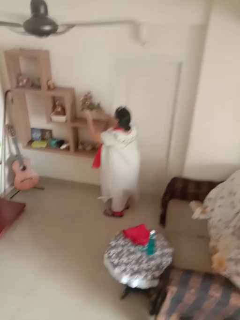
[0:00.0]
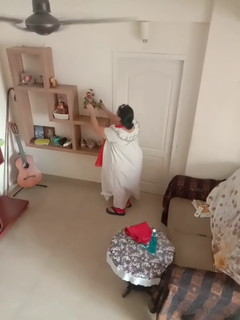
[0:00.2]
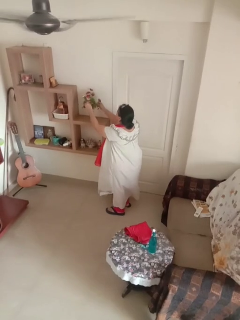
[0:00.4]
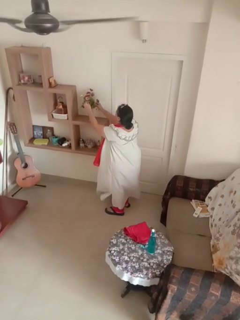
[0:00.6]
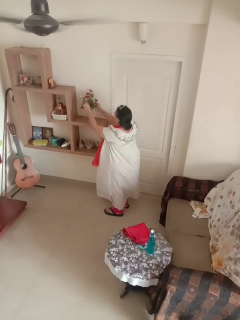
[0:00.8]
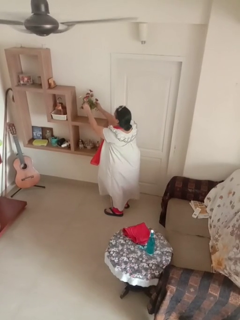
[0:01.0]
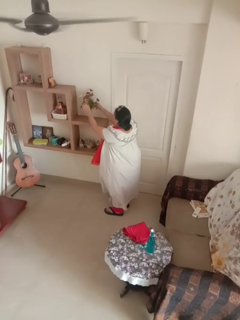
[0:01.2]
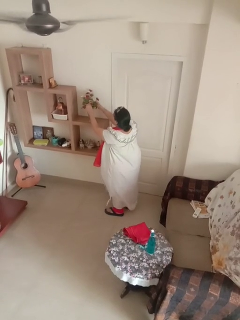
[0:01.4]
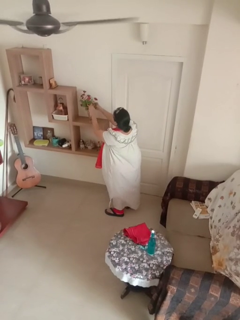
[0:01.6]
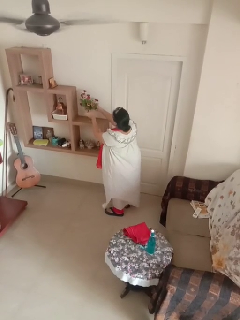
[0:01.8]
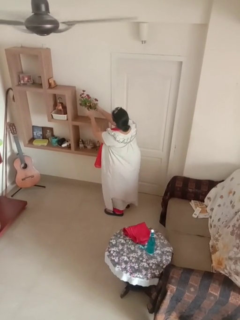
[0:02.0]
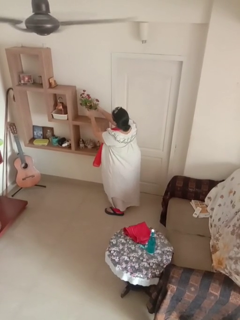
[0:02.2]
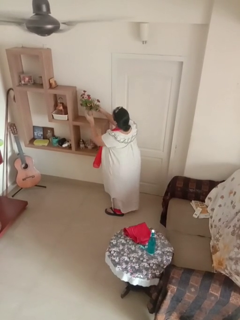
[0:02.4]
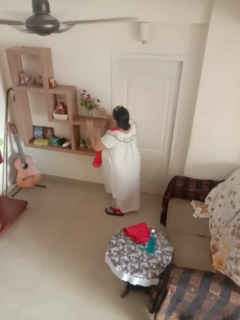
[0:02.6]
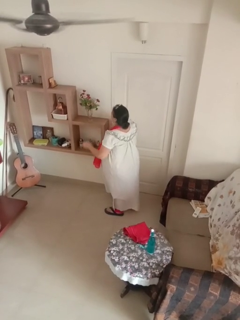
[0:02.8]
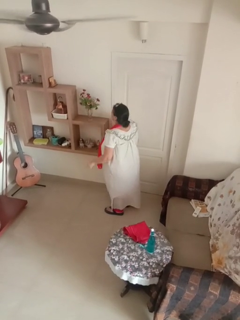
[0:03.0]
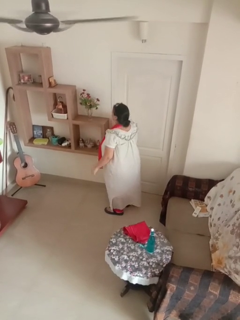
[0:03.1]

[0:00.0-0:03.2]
person arranges flowers in vase

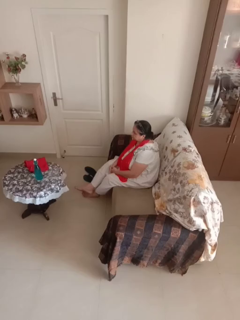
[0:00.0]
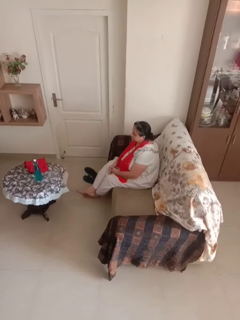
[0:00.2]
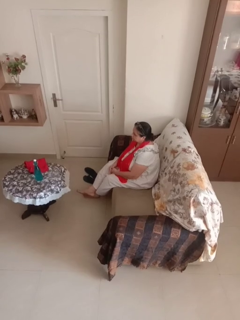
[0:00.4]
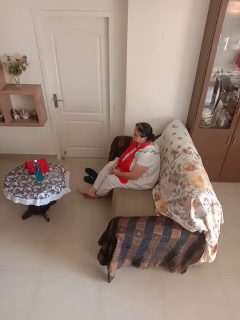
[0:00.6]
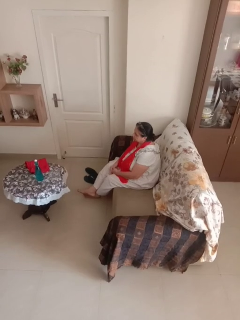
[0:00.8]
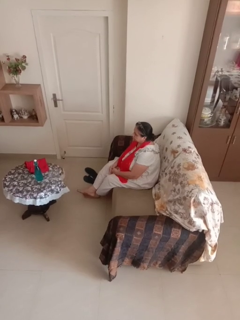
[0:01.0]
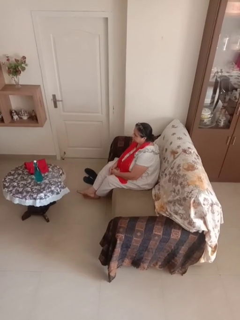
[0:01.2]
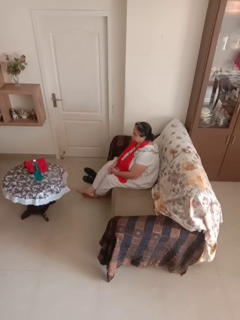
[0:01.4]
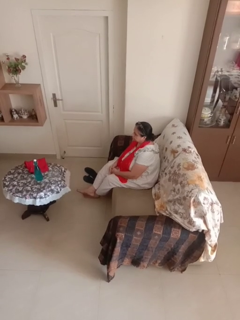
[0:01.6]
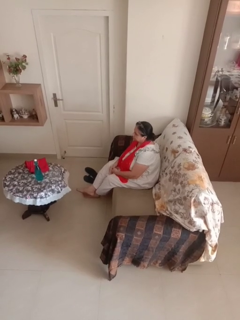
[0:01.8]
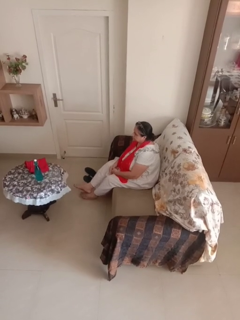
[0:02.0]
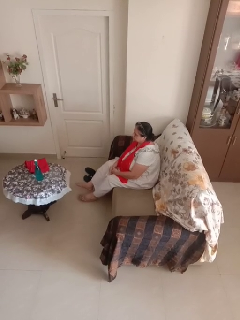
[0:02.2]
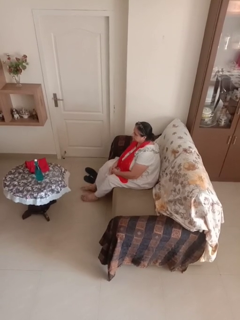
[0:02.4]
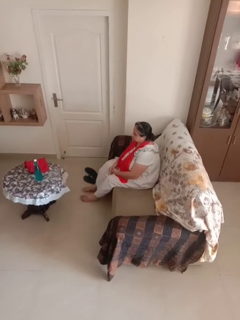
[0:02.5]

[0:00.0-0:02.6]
person crosses legs

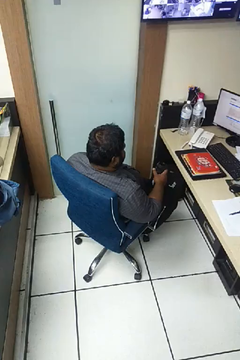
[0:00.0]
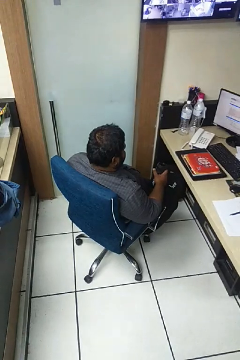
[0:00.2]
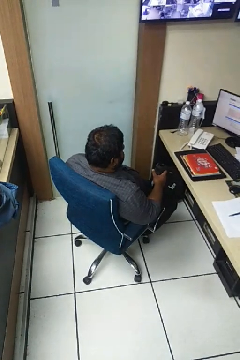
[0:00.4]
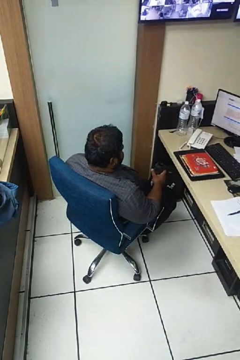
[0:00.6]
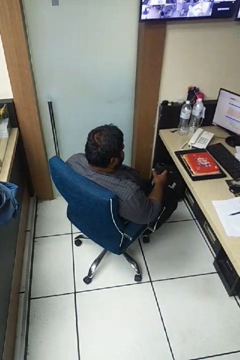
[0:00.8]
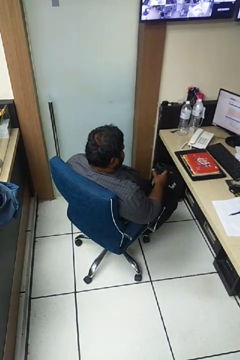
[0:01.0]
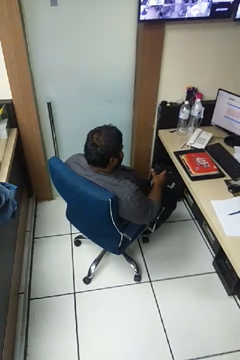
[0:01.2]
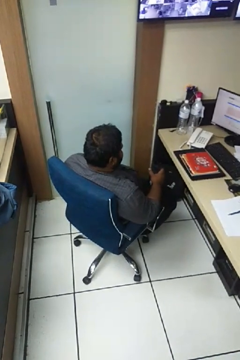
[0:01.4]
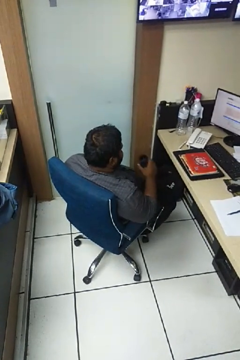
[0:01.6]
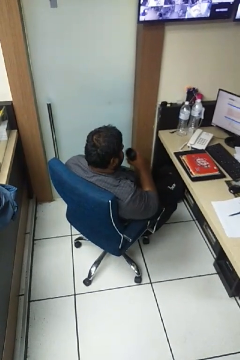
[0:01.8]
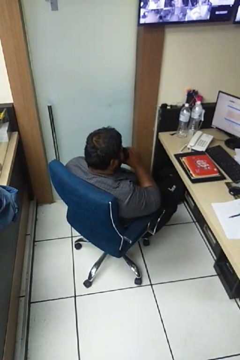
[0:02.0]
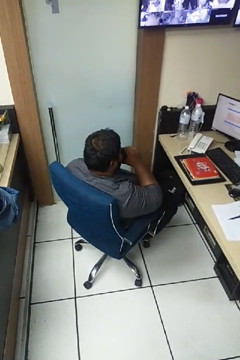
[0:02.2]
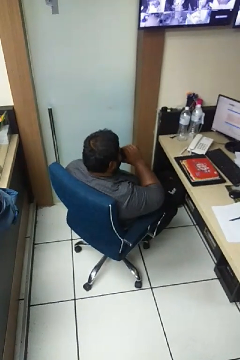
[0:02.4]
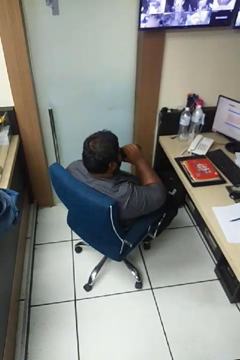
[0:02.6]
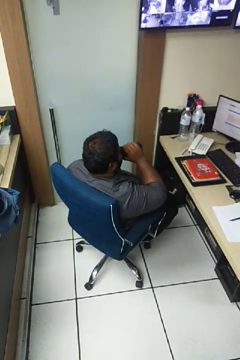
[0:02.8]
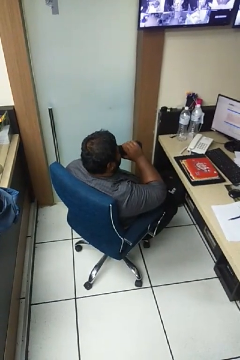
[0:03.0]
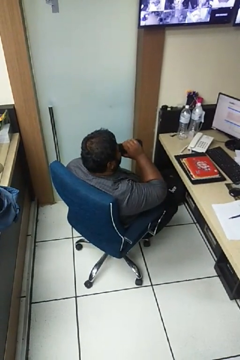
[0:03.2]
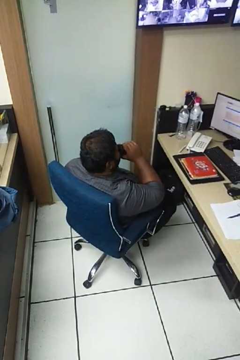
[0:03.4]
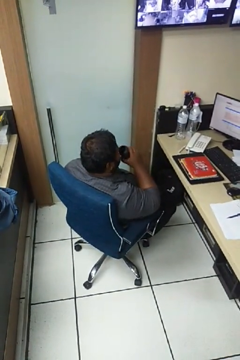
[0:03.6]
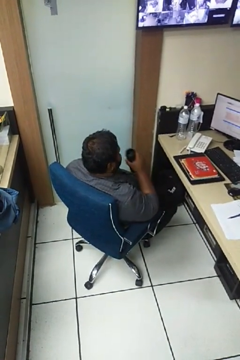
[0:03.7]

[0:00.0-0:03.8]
person drinks from bottle

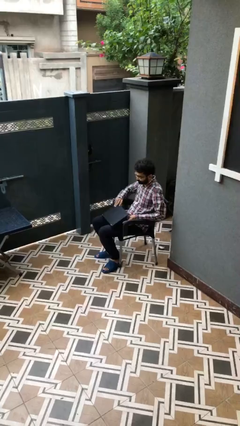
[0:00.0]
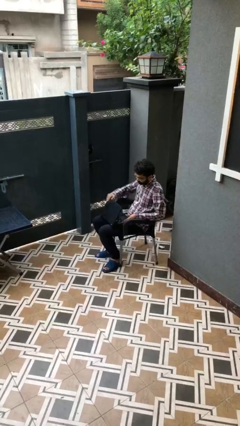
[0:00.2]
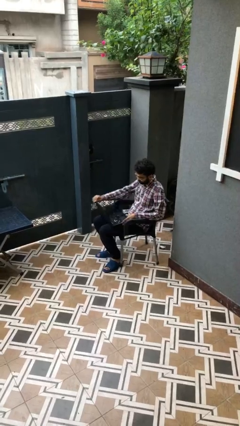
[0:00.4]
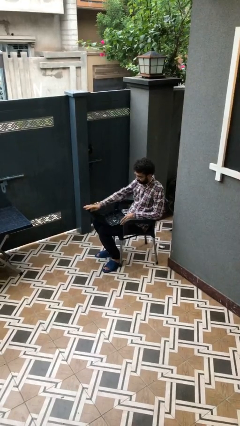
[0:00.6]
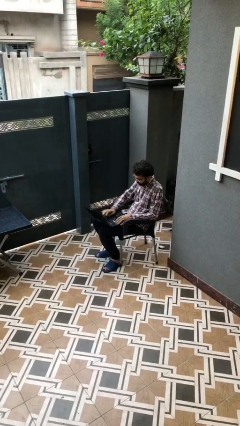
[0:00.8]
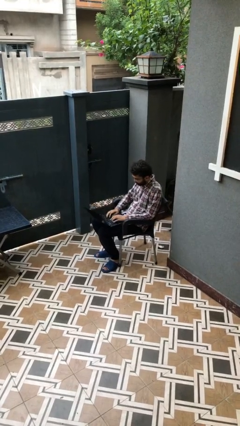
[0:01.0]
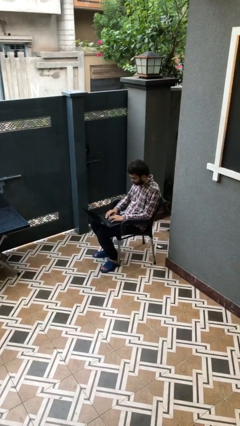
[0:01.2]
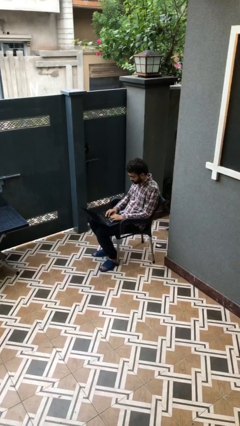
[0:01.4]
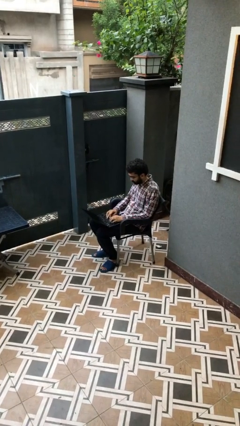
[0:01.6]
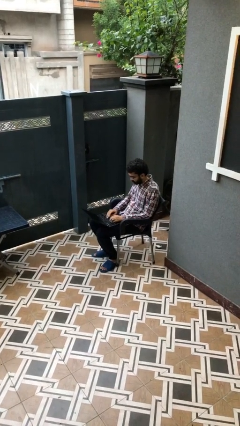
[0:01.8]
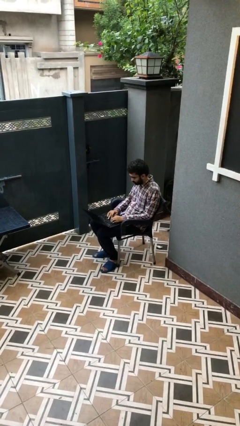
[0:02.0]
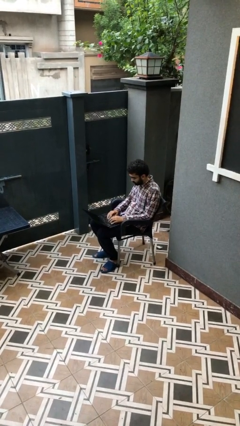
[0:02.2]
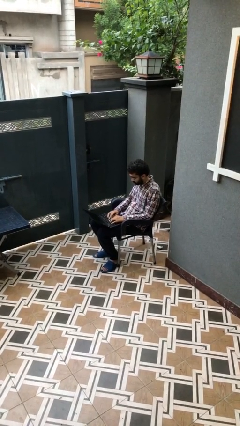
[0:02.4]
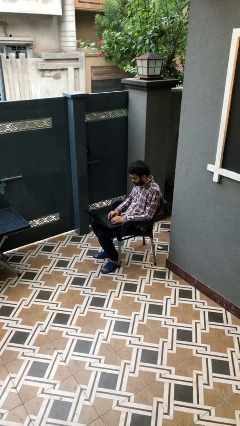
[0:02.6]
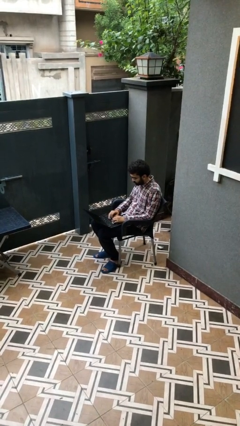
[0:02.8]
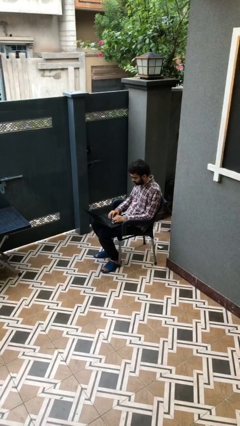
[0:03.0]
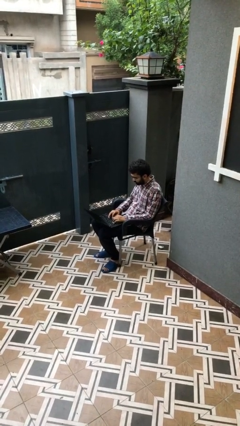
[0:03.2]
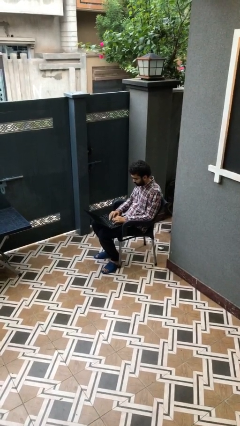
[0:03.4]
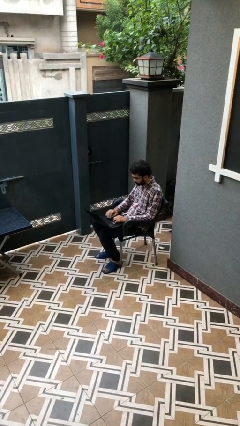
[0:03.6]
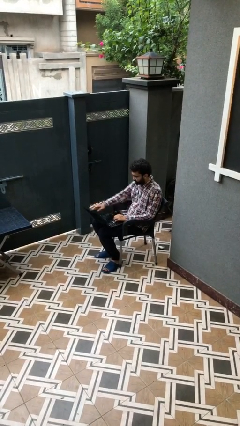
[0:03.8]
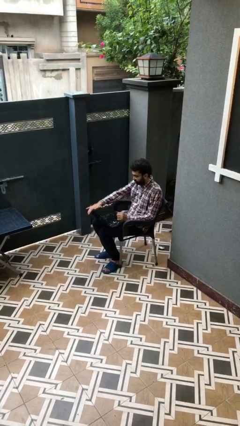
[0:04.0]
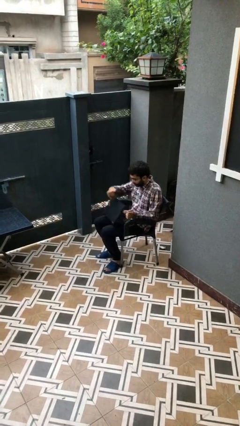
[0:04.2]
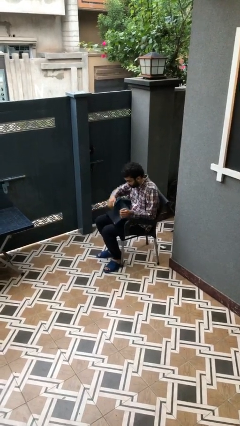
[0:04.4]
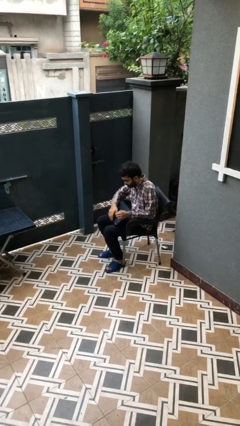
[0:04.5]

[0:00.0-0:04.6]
person interacts with laptop

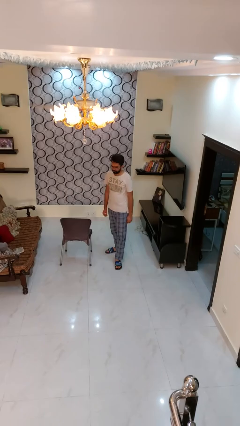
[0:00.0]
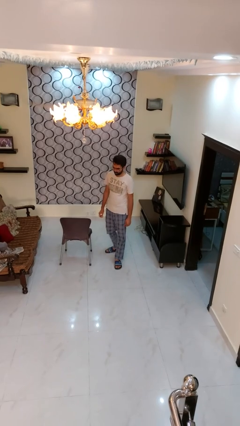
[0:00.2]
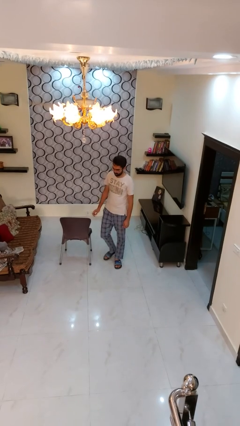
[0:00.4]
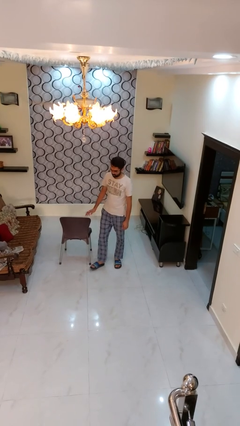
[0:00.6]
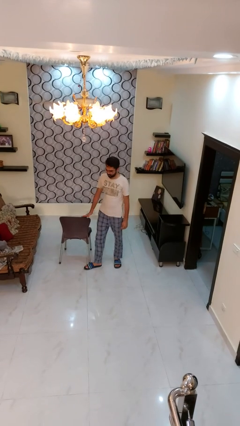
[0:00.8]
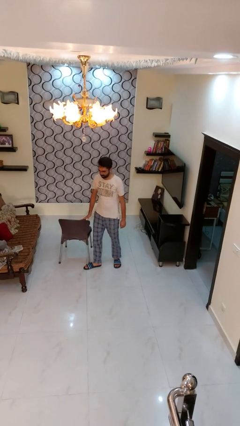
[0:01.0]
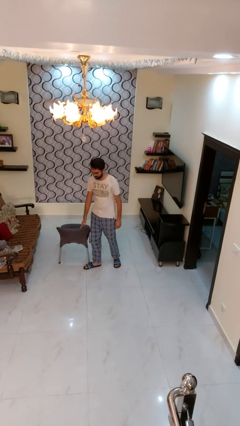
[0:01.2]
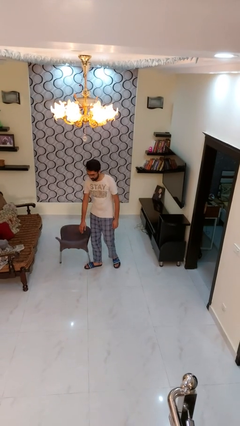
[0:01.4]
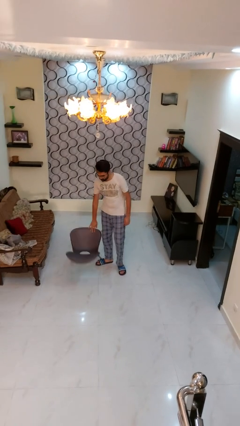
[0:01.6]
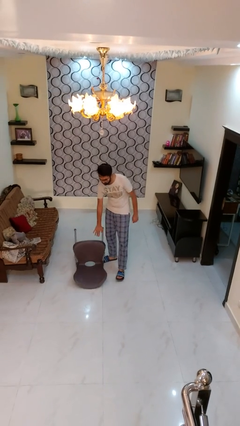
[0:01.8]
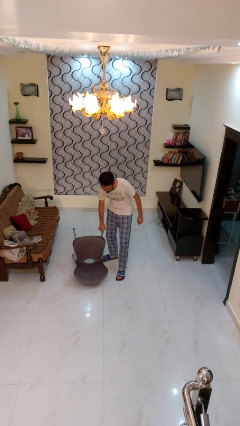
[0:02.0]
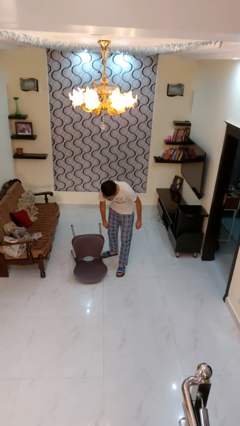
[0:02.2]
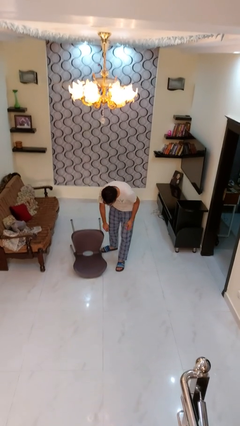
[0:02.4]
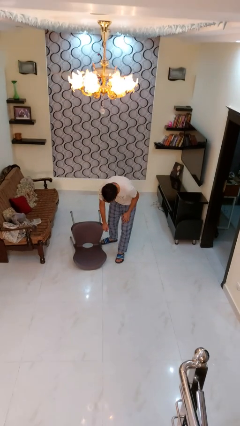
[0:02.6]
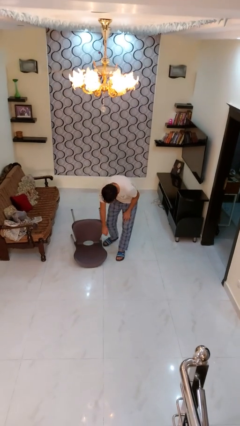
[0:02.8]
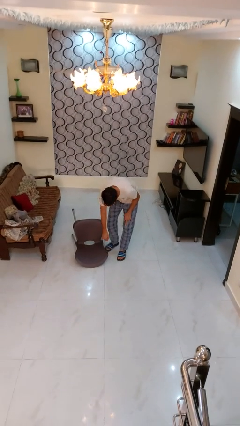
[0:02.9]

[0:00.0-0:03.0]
person knocks over furniture

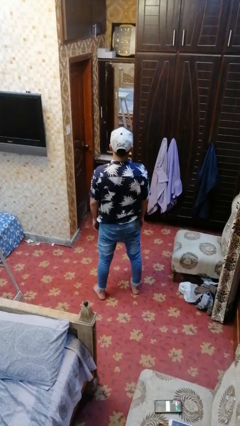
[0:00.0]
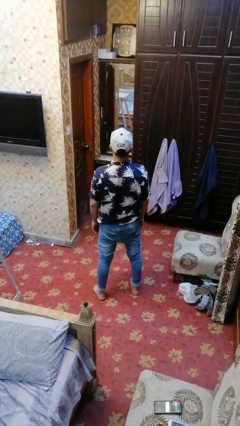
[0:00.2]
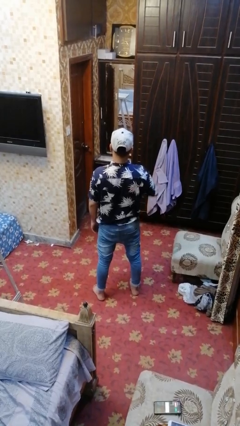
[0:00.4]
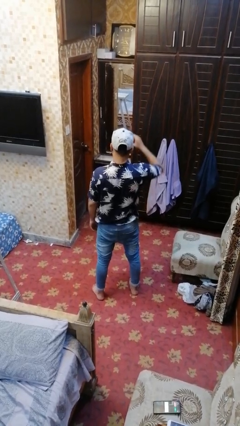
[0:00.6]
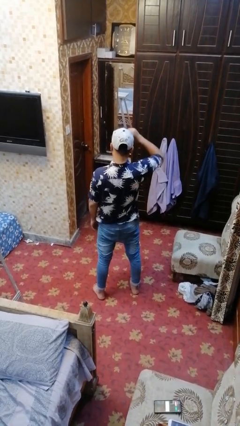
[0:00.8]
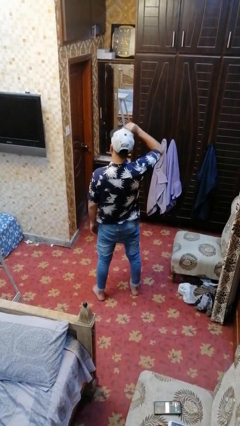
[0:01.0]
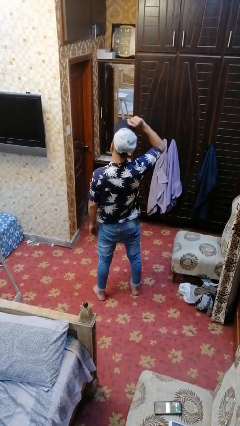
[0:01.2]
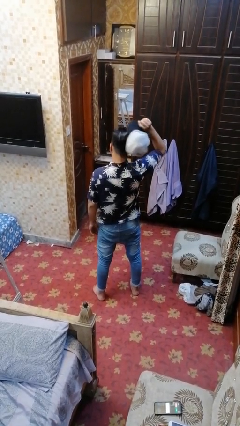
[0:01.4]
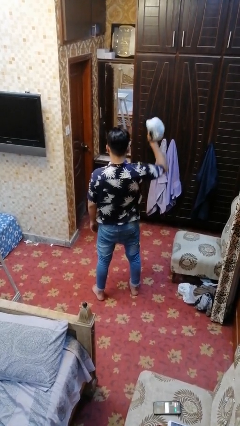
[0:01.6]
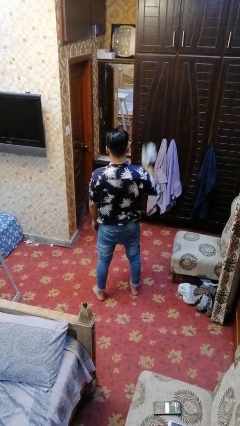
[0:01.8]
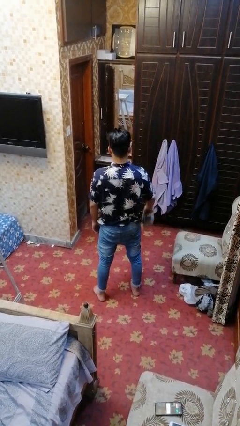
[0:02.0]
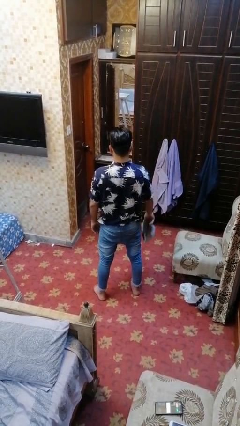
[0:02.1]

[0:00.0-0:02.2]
person takes off hat
